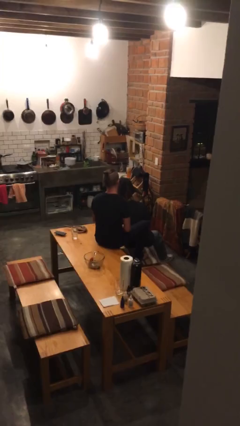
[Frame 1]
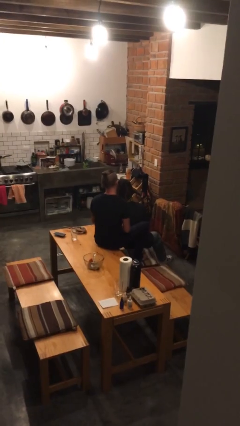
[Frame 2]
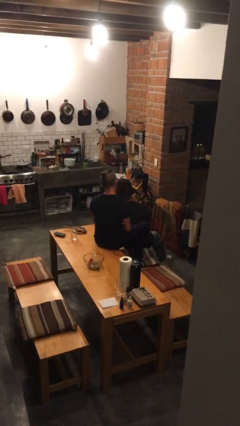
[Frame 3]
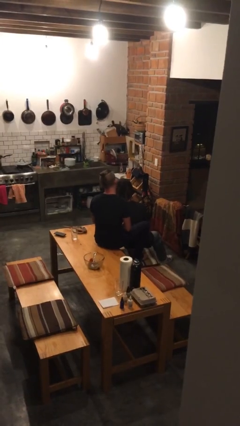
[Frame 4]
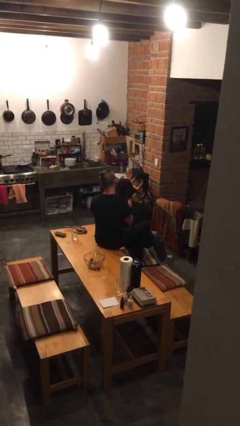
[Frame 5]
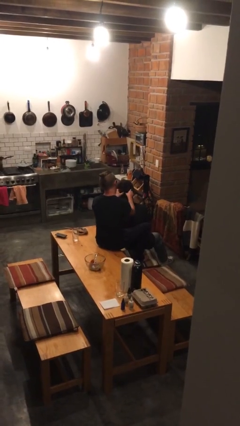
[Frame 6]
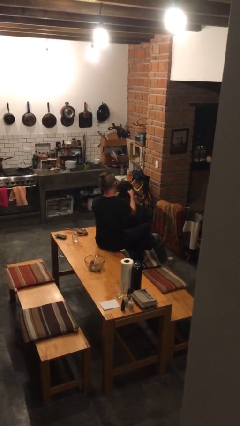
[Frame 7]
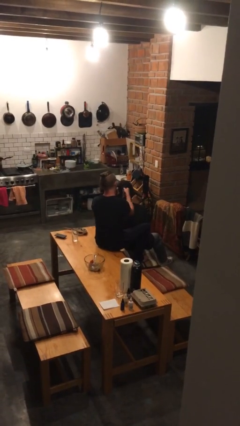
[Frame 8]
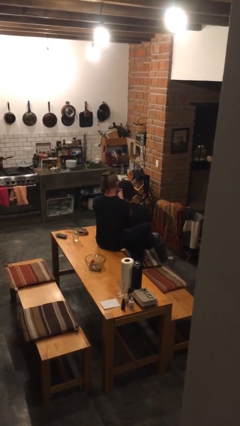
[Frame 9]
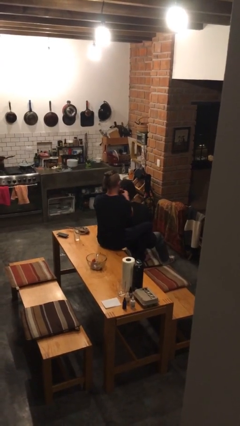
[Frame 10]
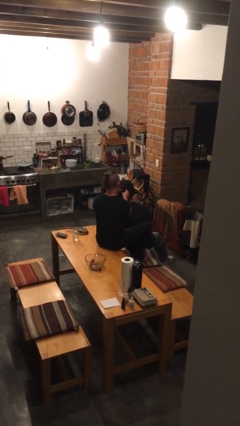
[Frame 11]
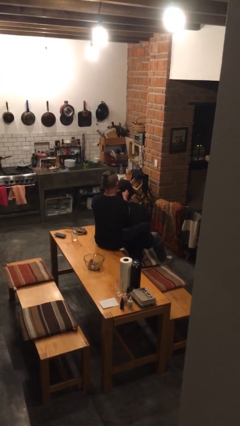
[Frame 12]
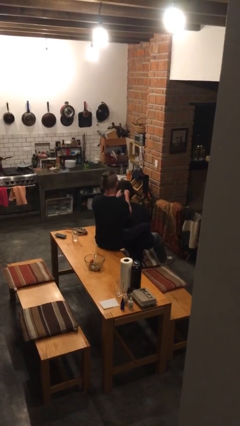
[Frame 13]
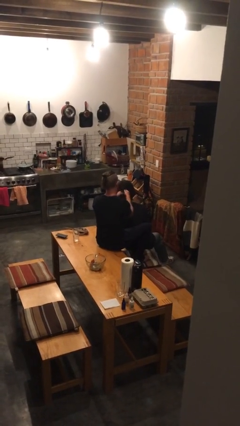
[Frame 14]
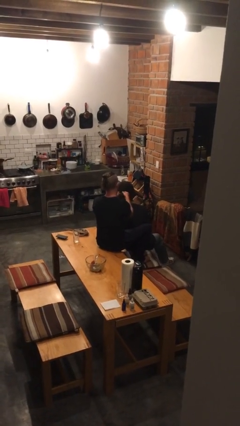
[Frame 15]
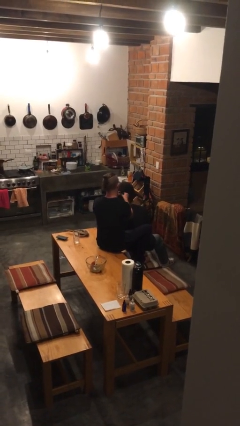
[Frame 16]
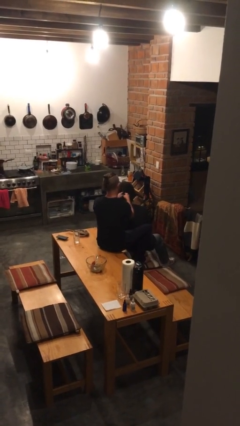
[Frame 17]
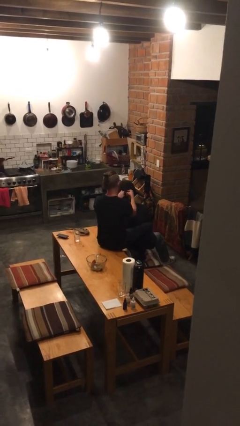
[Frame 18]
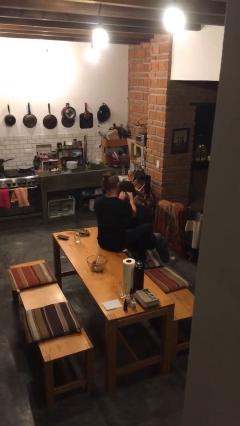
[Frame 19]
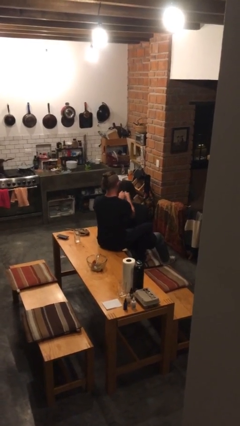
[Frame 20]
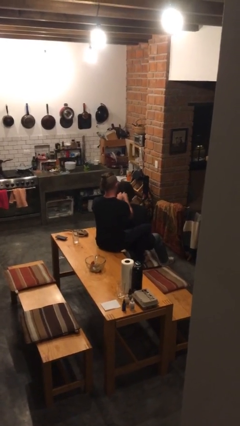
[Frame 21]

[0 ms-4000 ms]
person braids hair of person

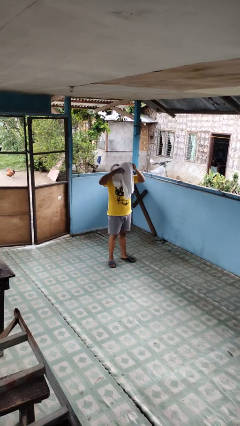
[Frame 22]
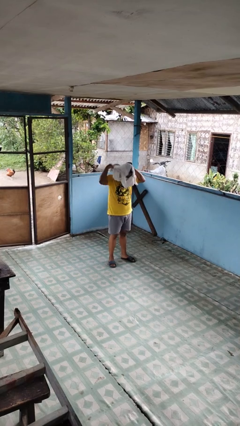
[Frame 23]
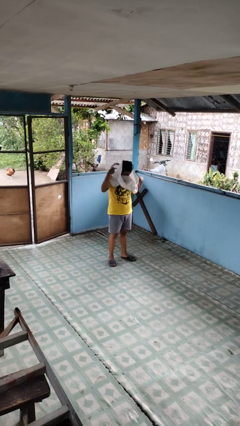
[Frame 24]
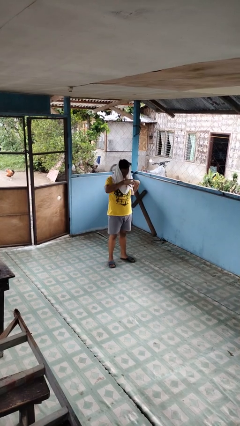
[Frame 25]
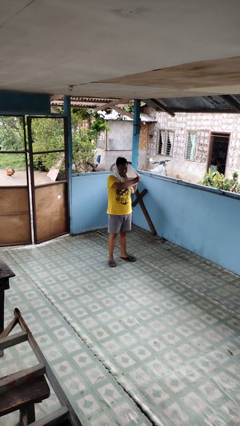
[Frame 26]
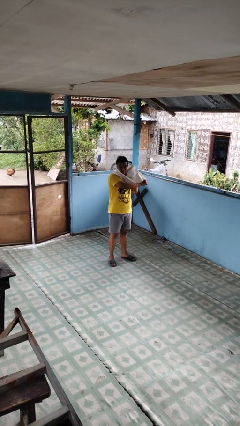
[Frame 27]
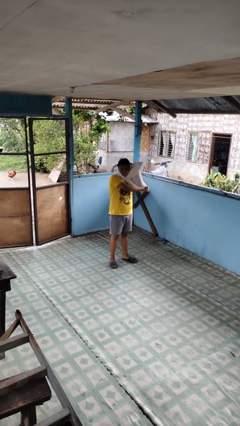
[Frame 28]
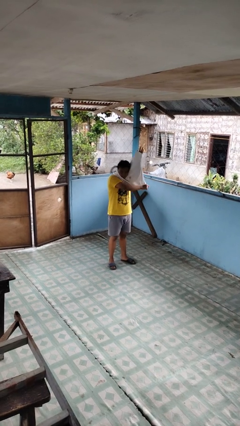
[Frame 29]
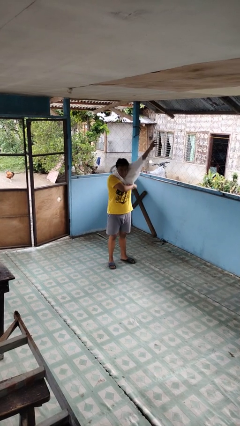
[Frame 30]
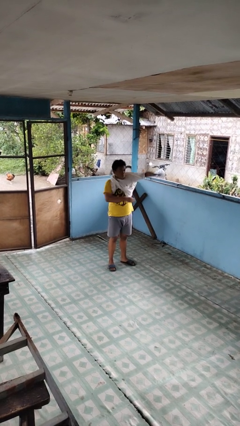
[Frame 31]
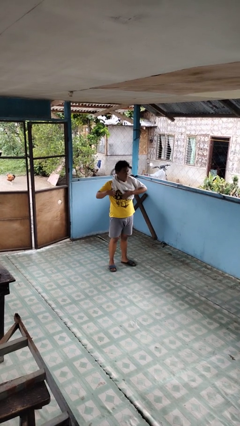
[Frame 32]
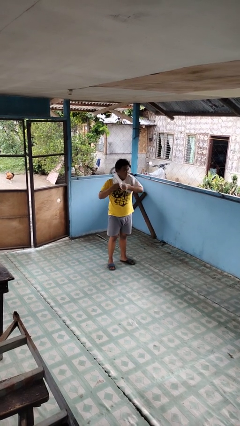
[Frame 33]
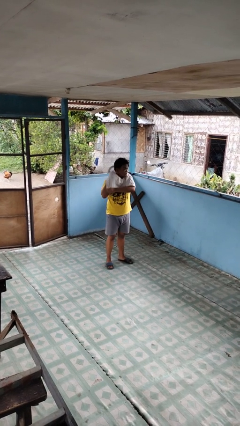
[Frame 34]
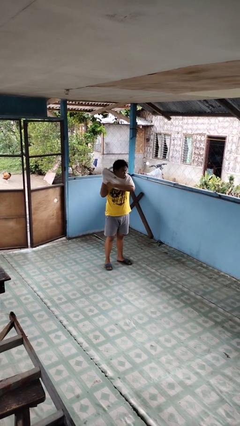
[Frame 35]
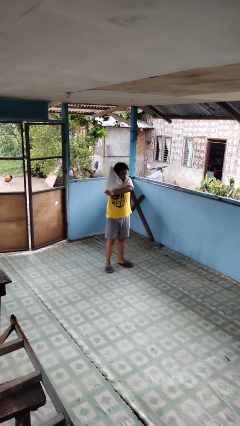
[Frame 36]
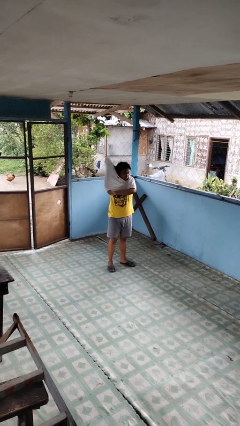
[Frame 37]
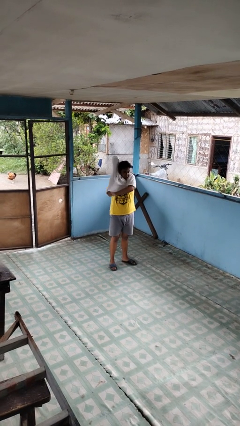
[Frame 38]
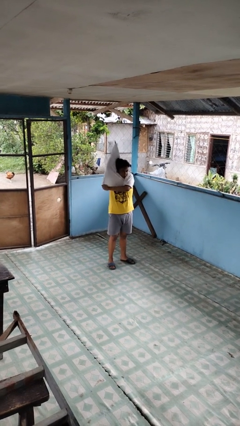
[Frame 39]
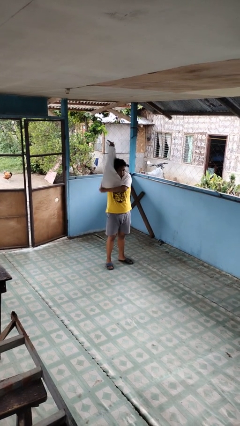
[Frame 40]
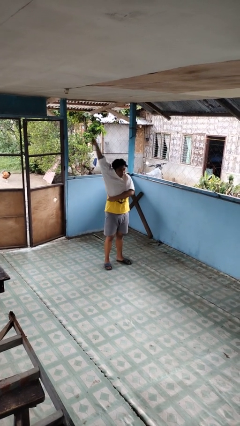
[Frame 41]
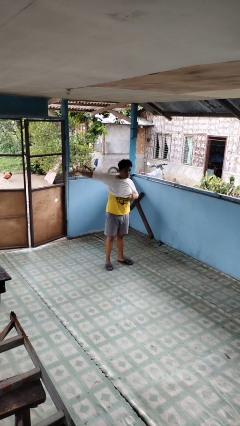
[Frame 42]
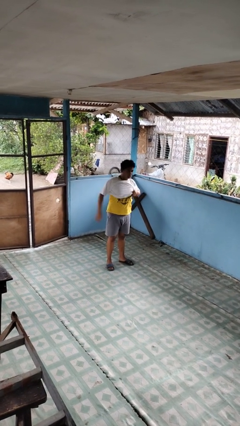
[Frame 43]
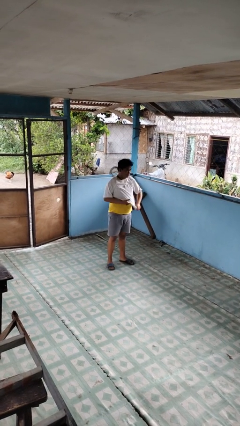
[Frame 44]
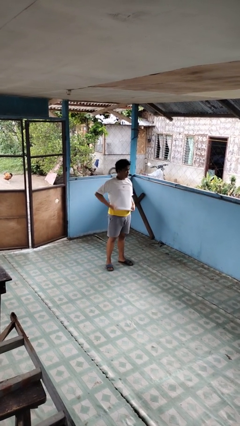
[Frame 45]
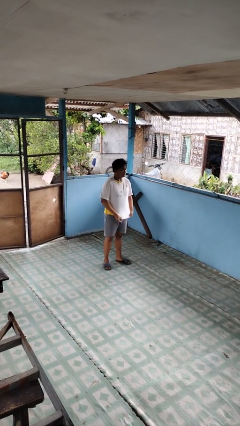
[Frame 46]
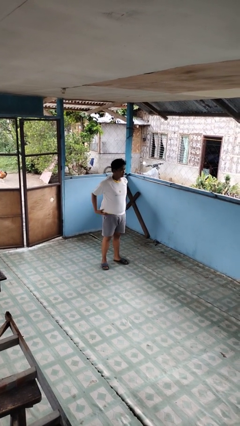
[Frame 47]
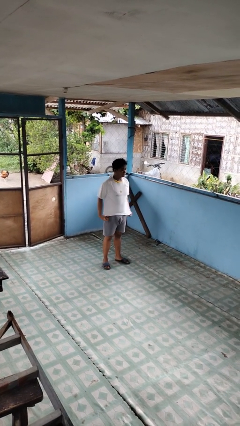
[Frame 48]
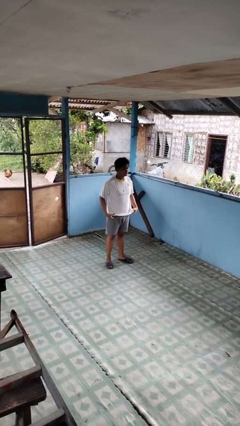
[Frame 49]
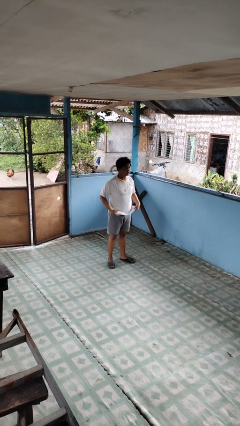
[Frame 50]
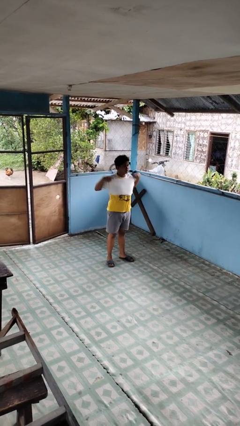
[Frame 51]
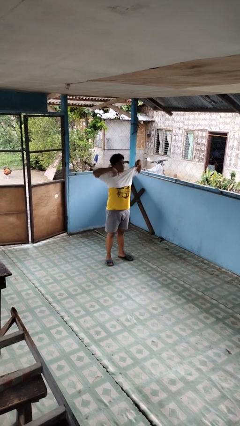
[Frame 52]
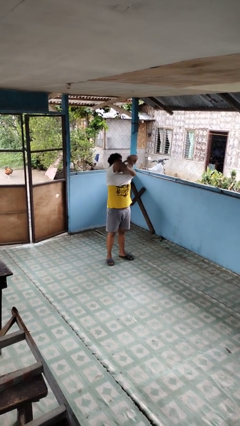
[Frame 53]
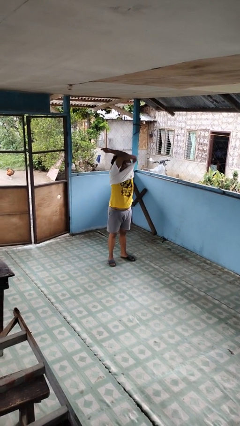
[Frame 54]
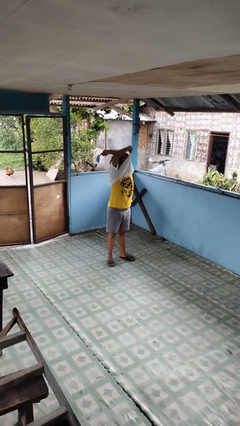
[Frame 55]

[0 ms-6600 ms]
person puts on shirt

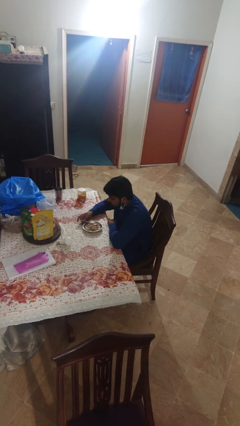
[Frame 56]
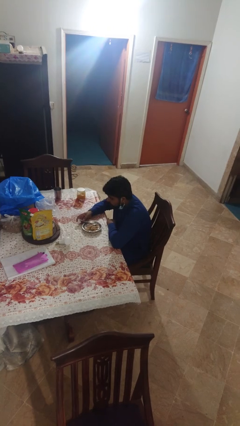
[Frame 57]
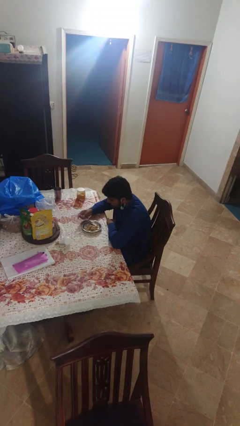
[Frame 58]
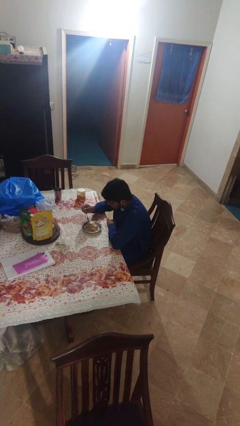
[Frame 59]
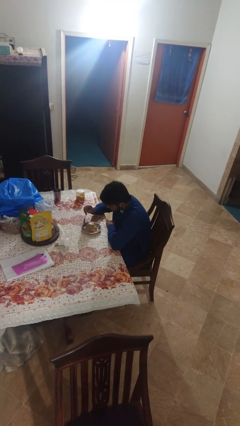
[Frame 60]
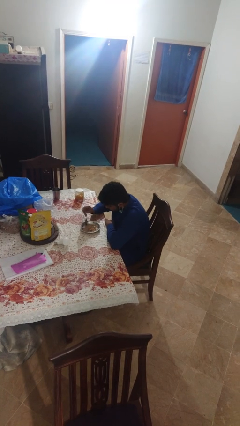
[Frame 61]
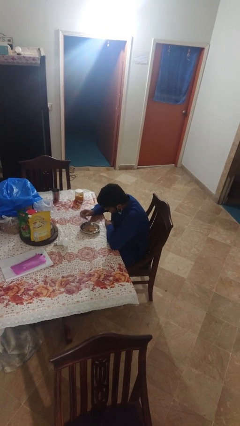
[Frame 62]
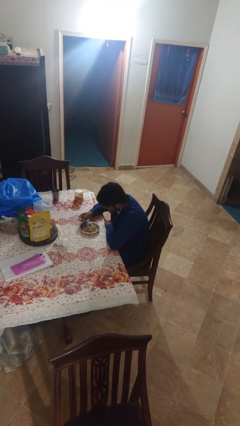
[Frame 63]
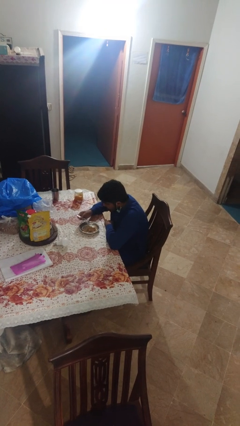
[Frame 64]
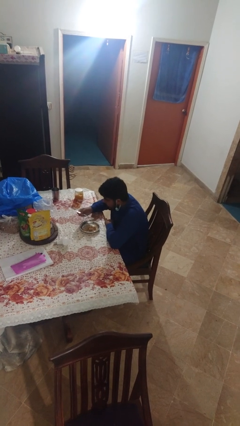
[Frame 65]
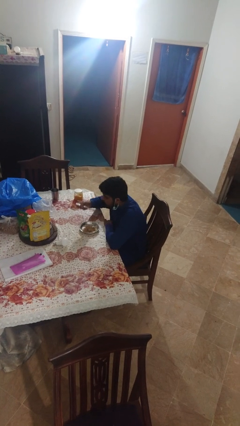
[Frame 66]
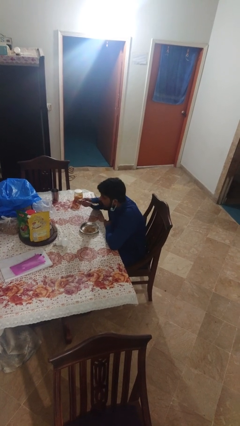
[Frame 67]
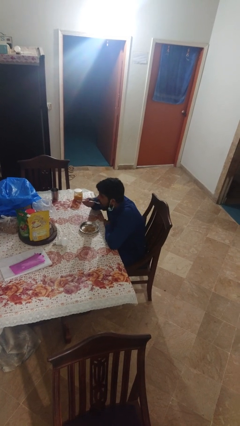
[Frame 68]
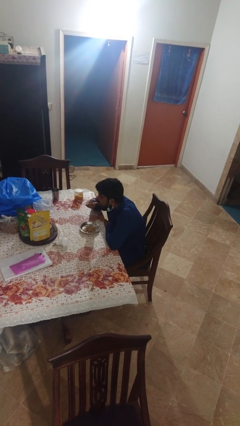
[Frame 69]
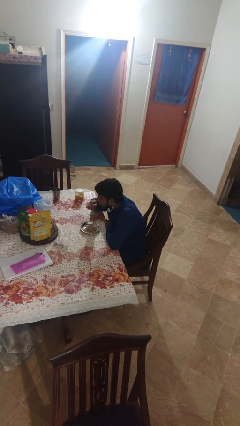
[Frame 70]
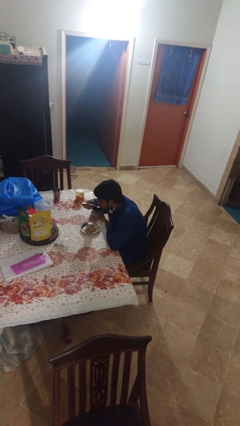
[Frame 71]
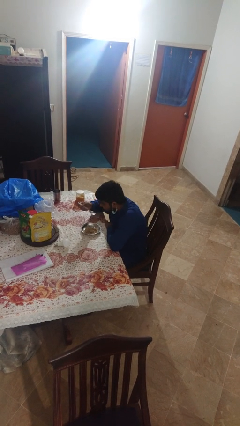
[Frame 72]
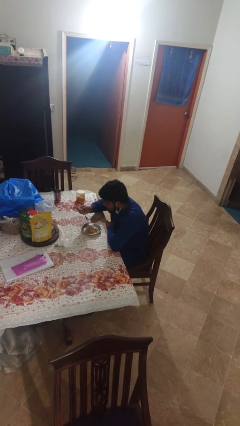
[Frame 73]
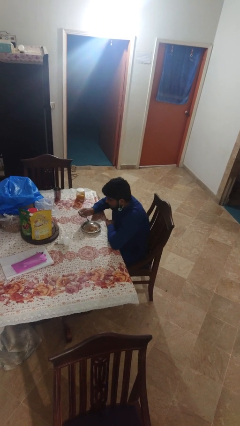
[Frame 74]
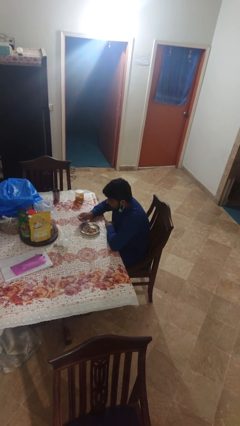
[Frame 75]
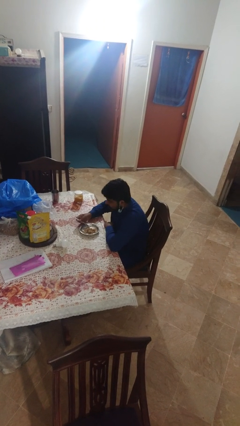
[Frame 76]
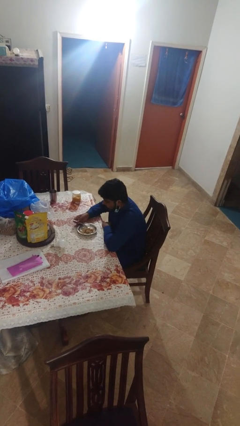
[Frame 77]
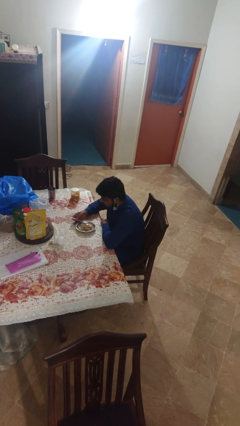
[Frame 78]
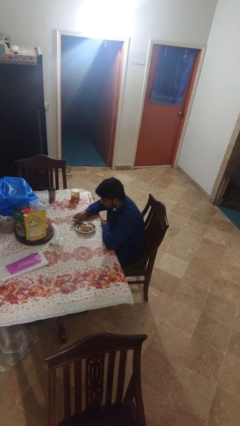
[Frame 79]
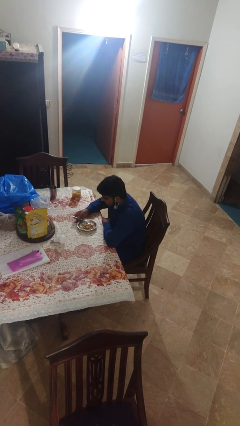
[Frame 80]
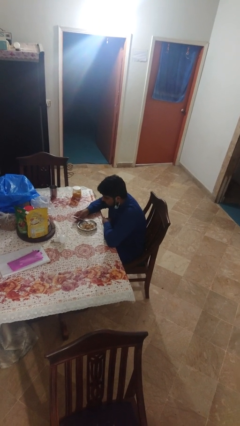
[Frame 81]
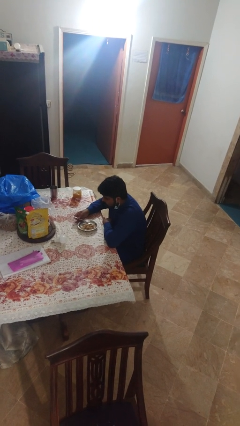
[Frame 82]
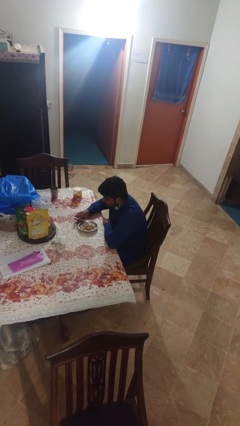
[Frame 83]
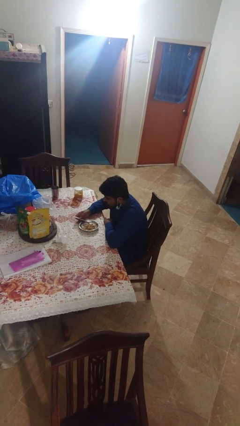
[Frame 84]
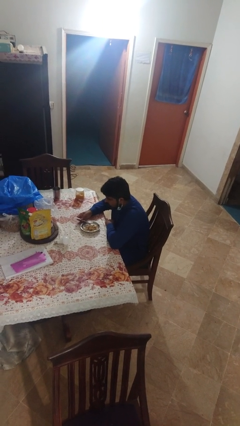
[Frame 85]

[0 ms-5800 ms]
person eats with utensil

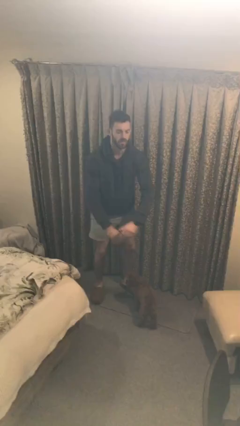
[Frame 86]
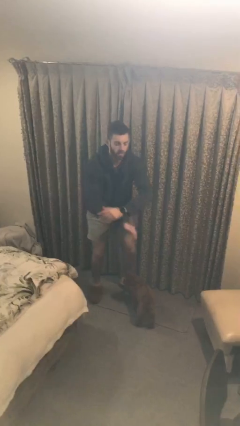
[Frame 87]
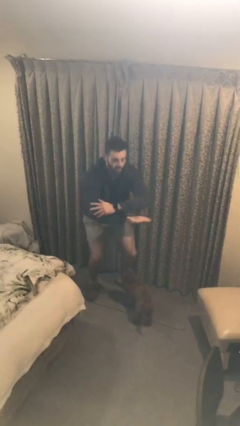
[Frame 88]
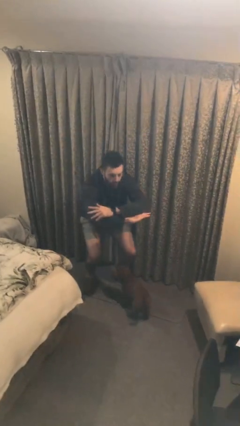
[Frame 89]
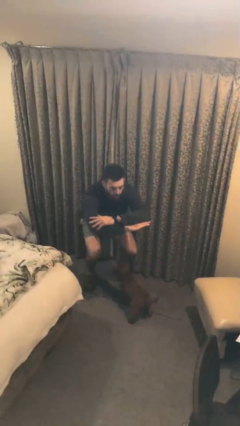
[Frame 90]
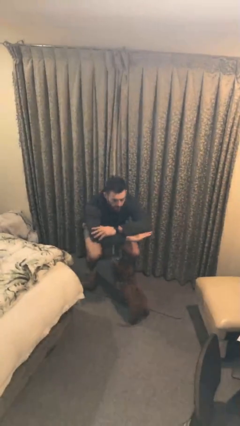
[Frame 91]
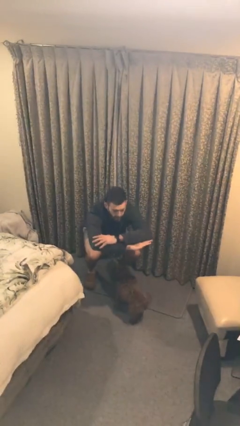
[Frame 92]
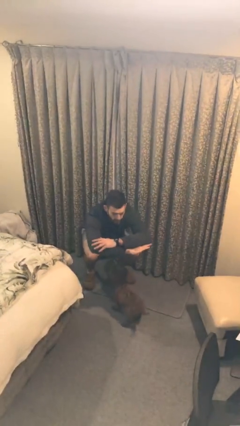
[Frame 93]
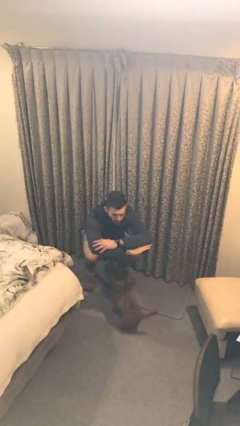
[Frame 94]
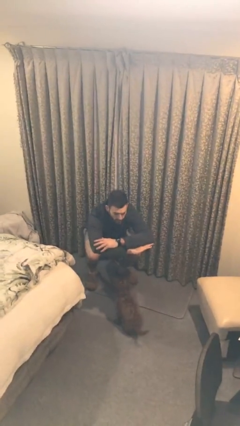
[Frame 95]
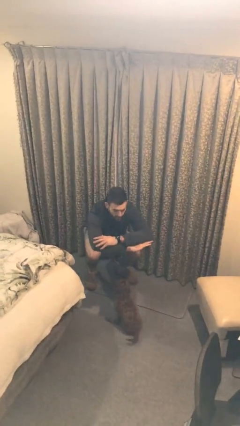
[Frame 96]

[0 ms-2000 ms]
person squats
